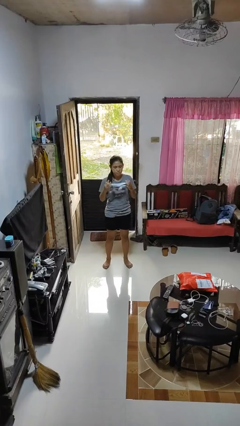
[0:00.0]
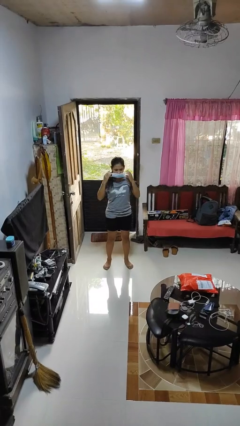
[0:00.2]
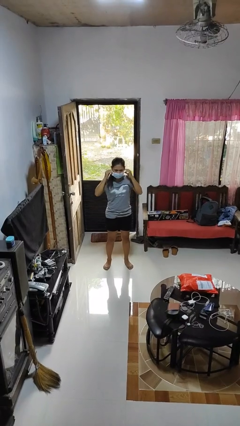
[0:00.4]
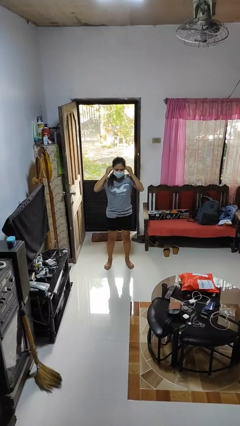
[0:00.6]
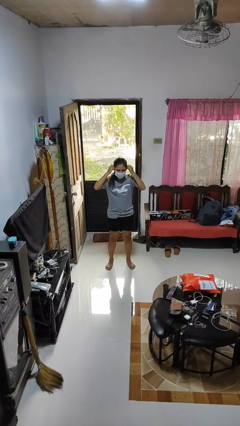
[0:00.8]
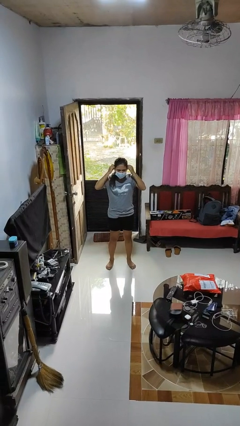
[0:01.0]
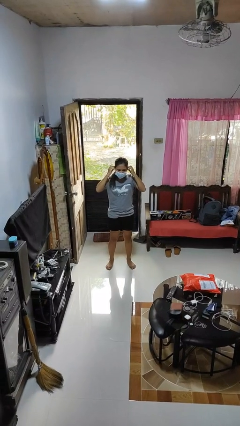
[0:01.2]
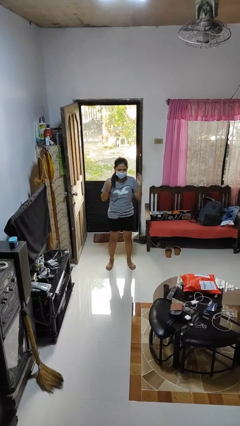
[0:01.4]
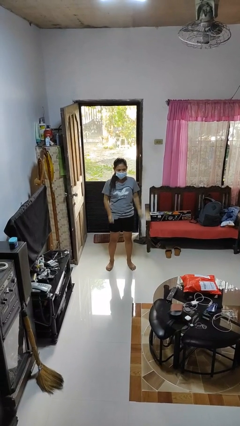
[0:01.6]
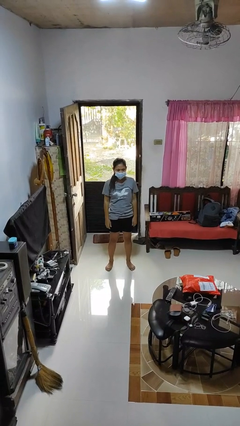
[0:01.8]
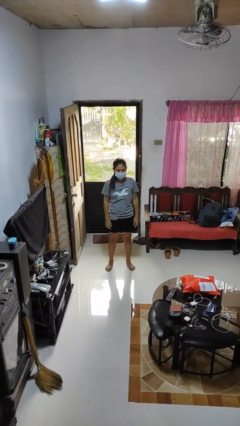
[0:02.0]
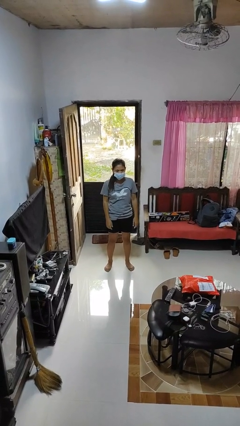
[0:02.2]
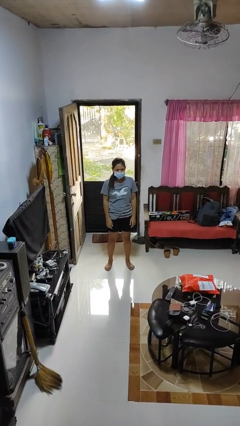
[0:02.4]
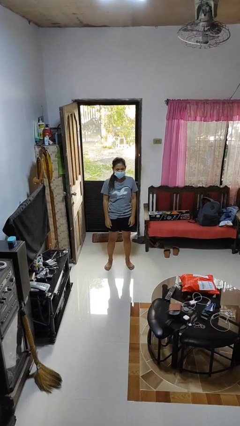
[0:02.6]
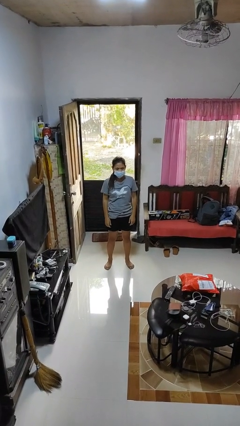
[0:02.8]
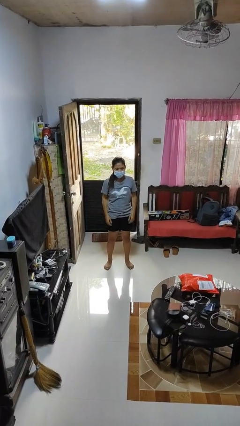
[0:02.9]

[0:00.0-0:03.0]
person puts on facemask

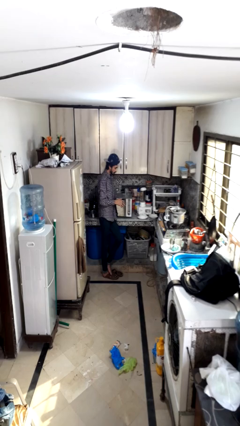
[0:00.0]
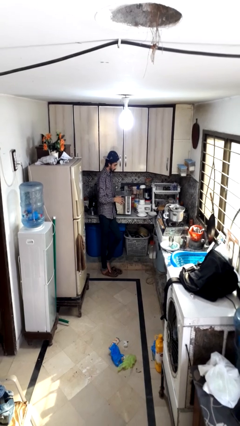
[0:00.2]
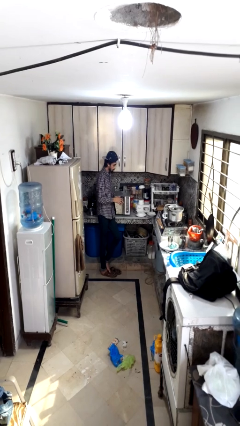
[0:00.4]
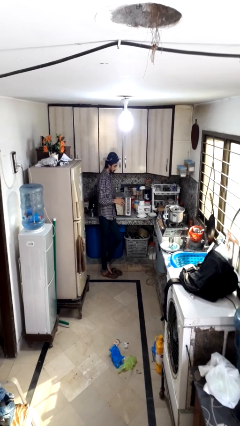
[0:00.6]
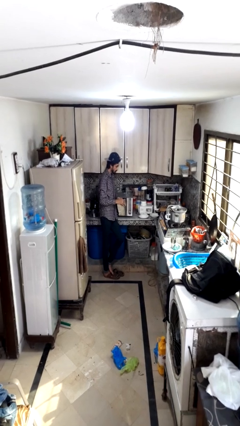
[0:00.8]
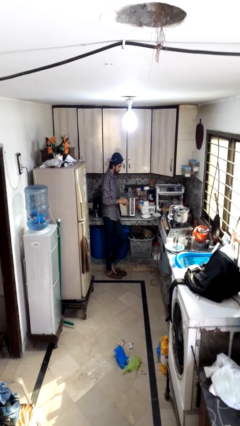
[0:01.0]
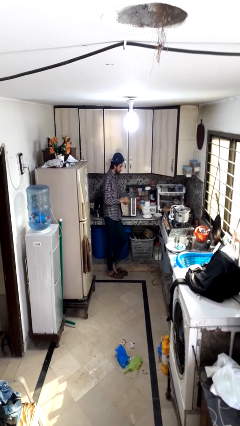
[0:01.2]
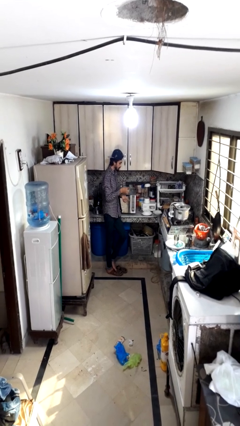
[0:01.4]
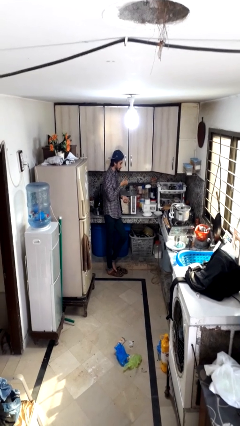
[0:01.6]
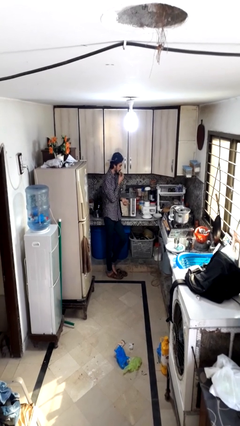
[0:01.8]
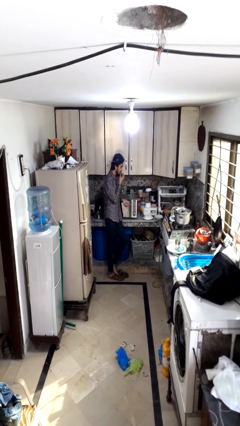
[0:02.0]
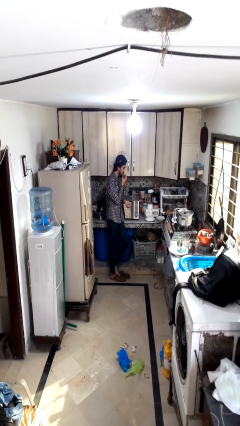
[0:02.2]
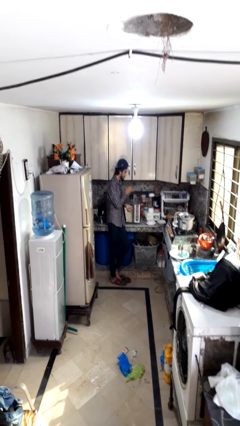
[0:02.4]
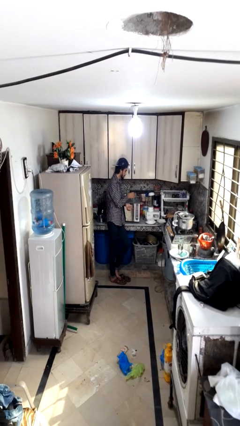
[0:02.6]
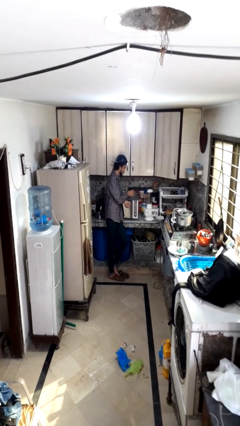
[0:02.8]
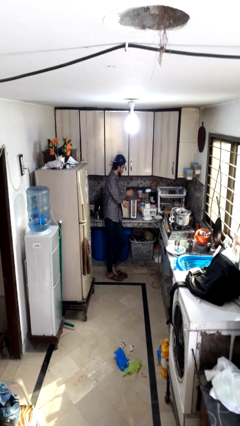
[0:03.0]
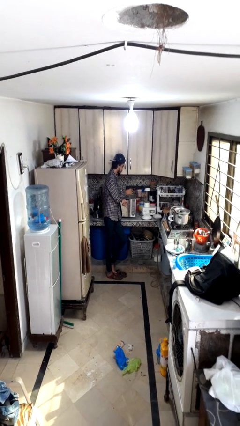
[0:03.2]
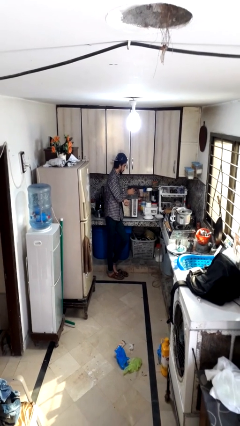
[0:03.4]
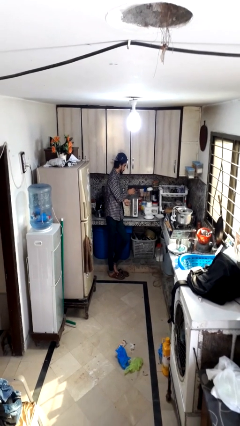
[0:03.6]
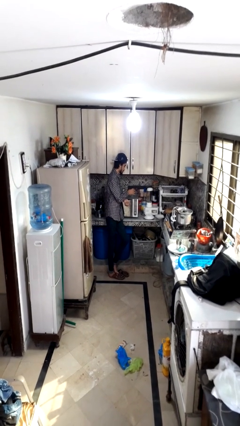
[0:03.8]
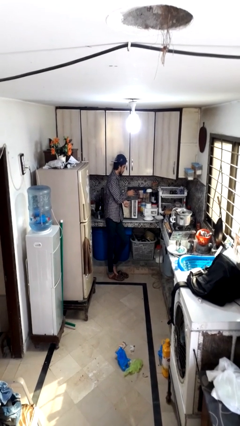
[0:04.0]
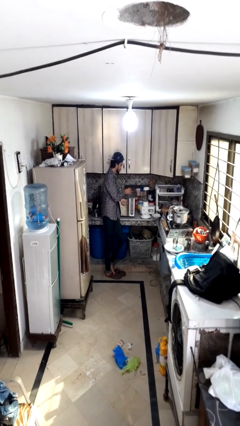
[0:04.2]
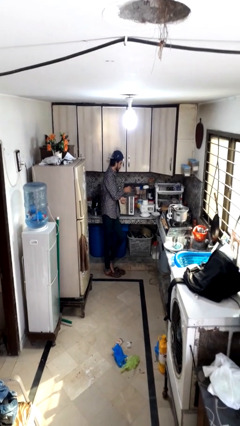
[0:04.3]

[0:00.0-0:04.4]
person takes medicine pills

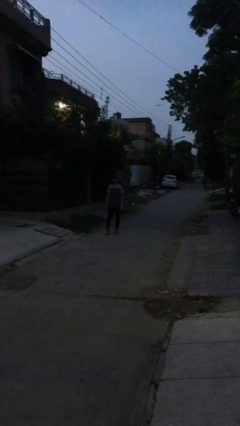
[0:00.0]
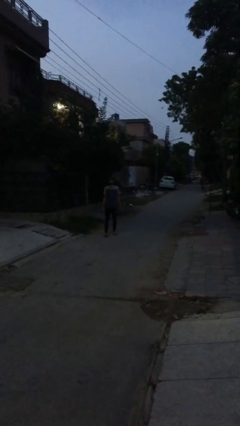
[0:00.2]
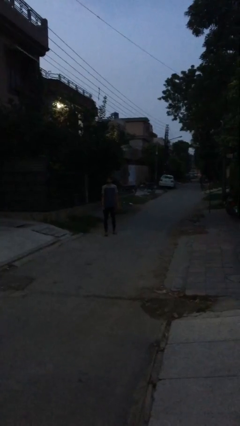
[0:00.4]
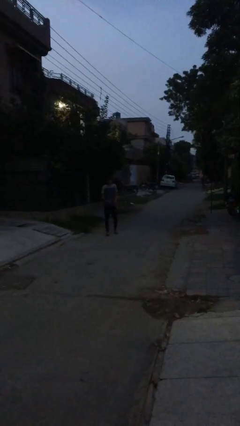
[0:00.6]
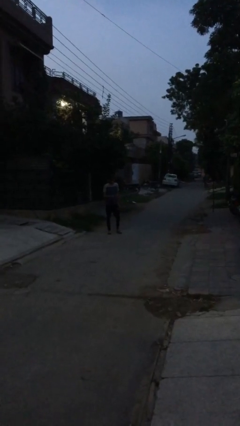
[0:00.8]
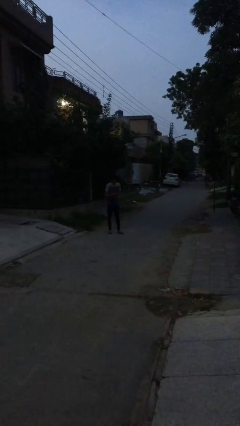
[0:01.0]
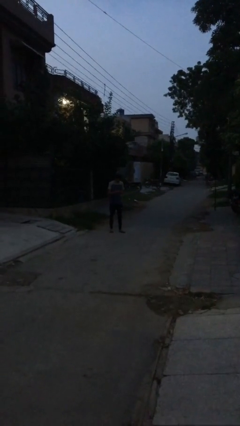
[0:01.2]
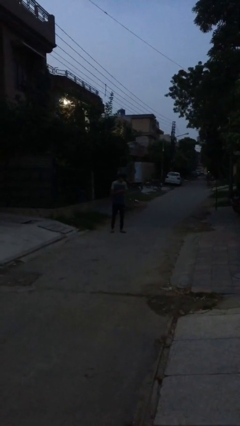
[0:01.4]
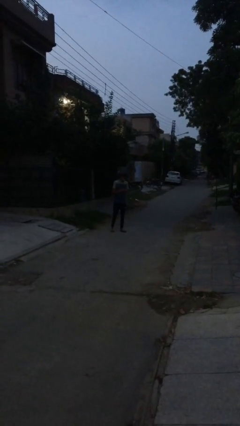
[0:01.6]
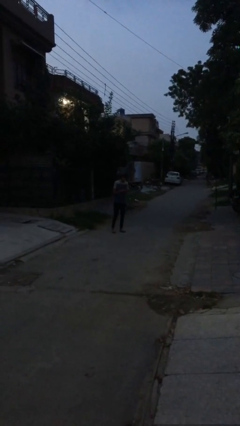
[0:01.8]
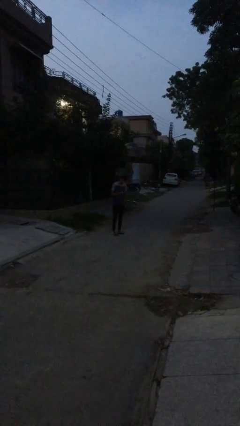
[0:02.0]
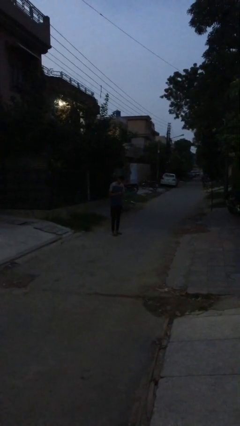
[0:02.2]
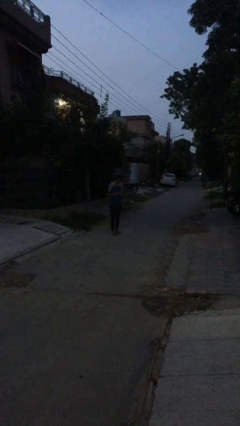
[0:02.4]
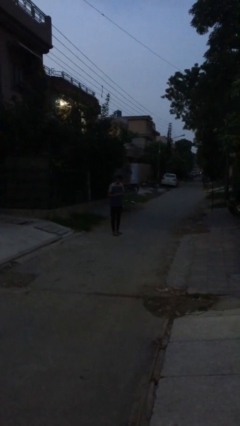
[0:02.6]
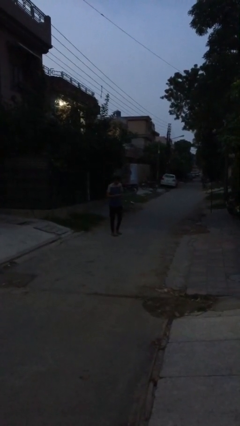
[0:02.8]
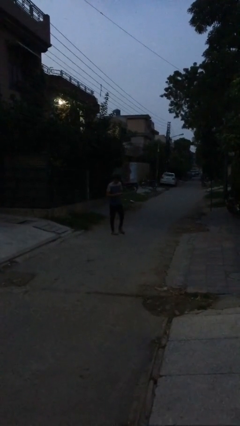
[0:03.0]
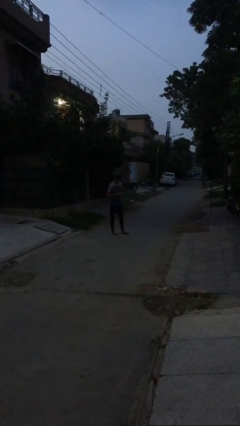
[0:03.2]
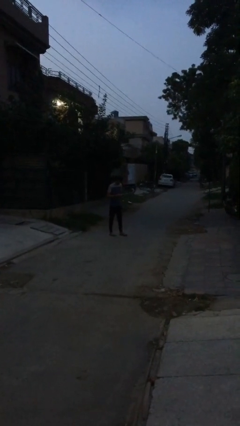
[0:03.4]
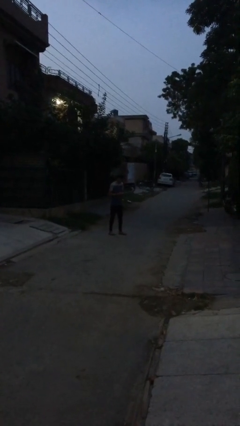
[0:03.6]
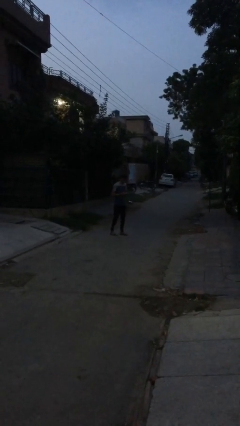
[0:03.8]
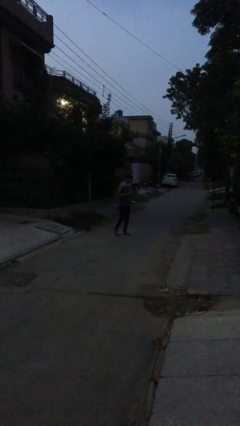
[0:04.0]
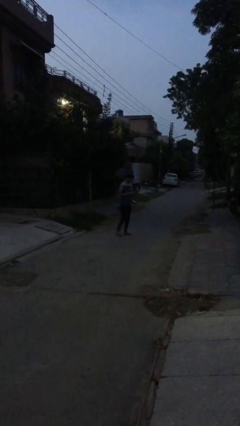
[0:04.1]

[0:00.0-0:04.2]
person texts on phone

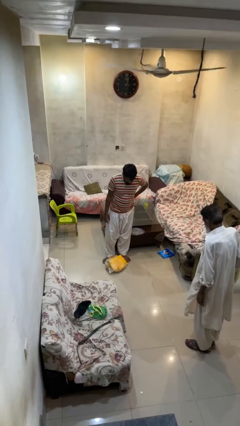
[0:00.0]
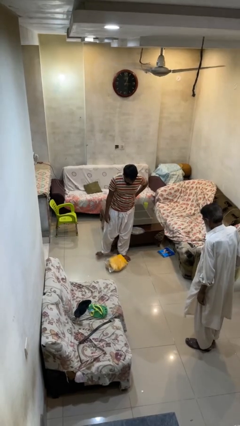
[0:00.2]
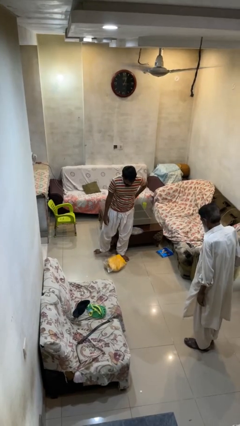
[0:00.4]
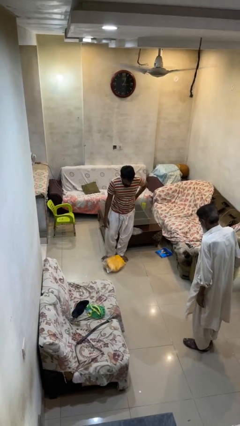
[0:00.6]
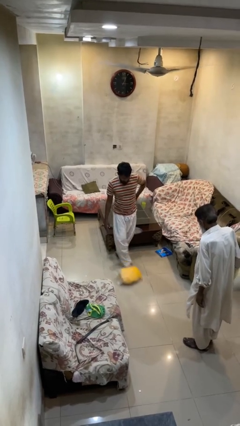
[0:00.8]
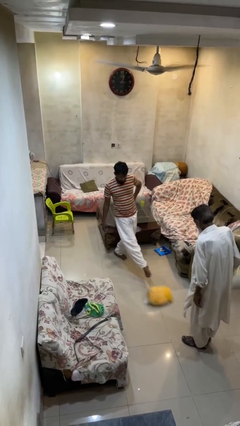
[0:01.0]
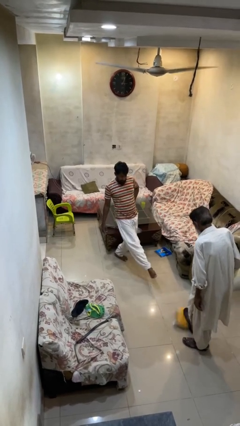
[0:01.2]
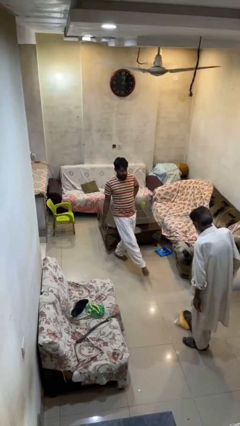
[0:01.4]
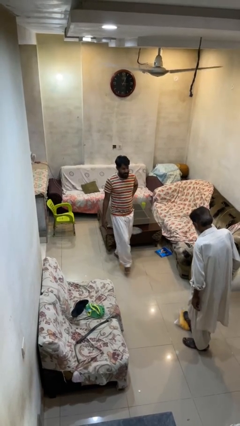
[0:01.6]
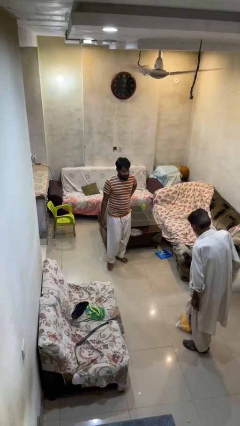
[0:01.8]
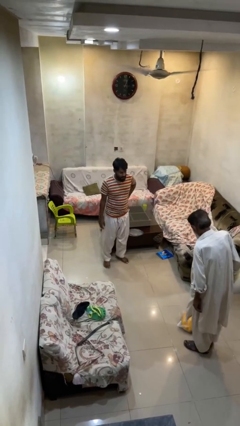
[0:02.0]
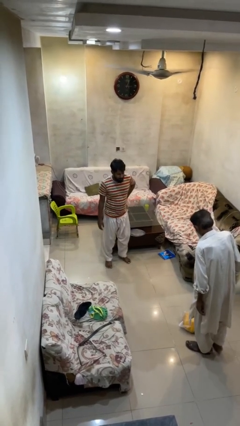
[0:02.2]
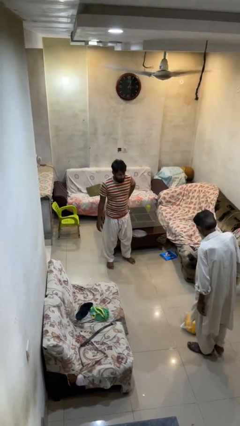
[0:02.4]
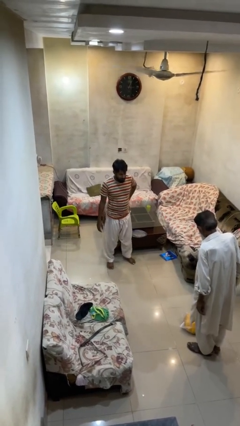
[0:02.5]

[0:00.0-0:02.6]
person kicks object to person

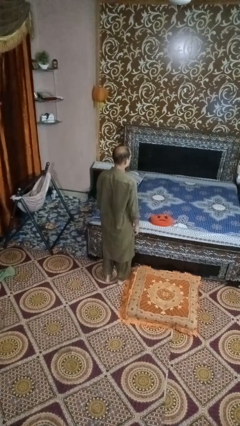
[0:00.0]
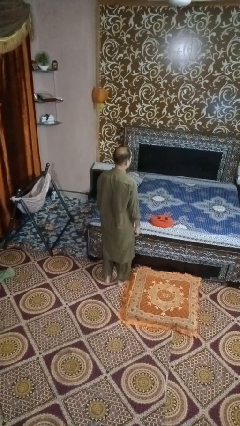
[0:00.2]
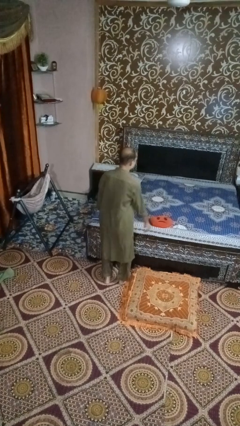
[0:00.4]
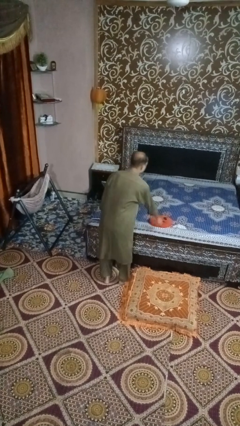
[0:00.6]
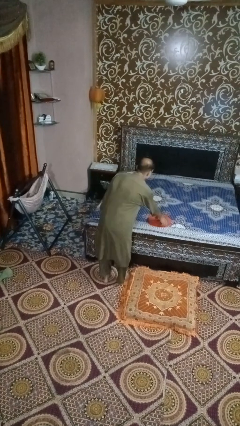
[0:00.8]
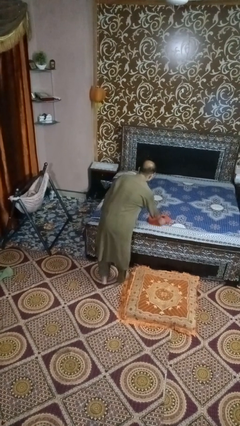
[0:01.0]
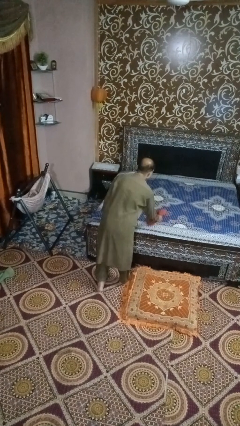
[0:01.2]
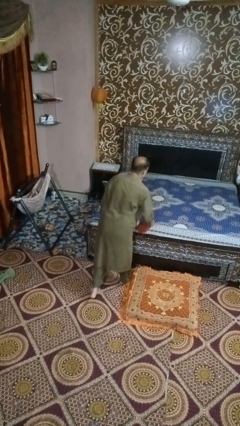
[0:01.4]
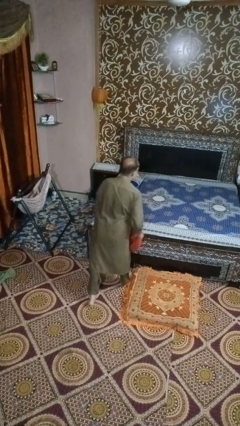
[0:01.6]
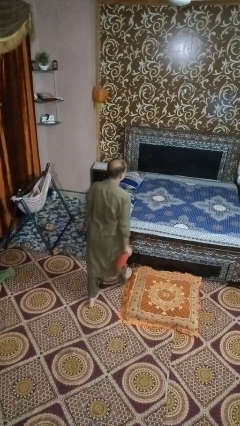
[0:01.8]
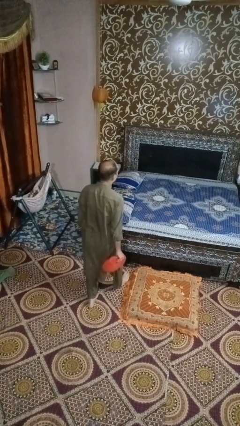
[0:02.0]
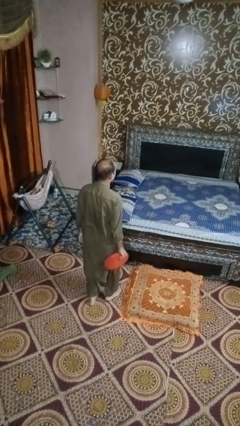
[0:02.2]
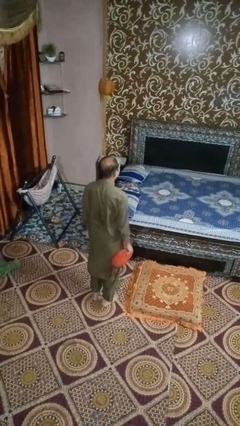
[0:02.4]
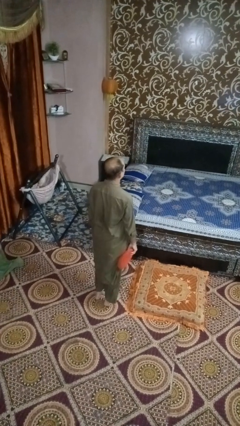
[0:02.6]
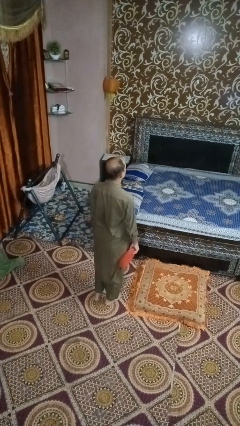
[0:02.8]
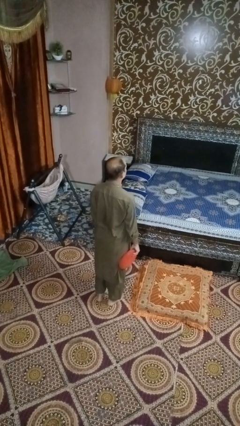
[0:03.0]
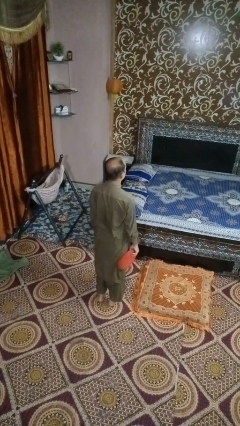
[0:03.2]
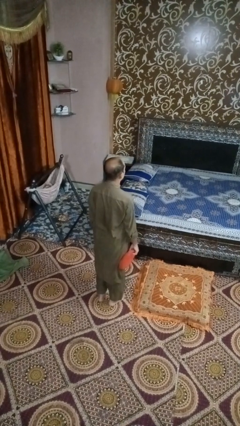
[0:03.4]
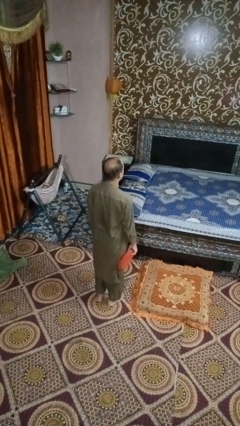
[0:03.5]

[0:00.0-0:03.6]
person picks up object from bed
